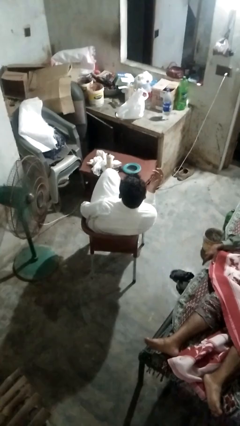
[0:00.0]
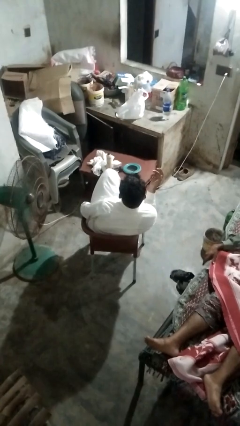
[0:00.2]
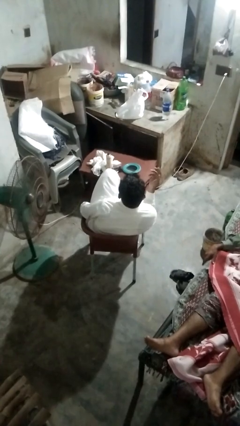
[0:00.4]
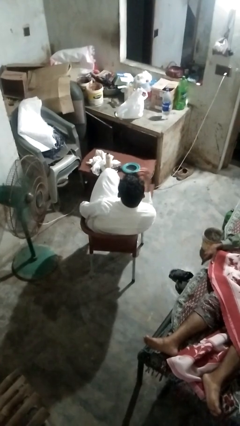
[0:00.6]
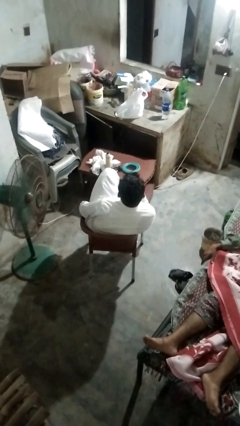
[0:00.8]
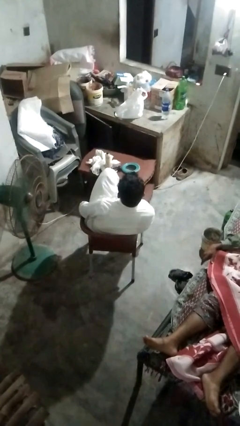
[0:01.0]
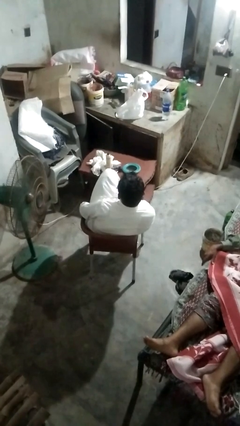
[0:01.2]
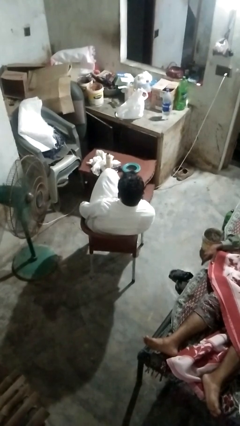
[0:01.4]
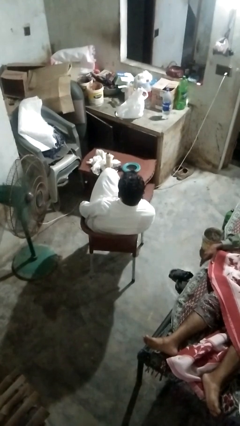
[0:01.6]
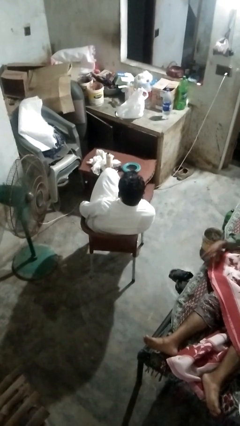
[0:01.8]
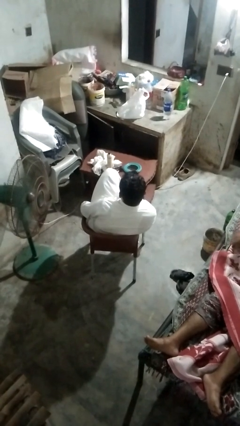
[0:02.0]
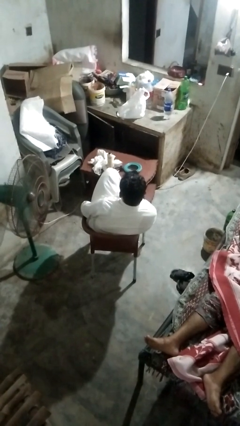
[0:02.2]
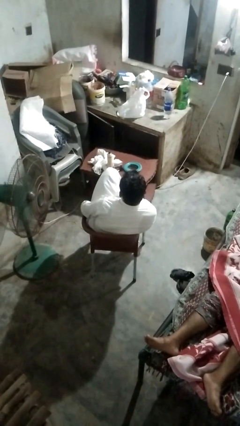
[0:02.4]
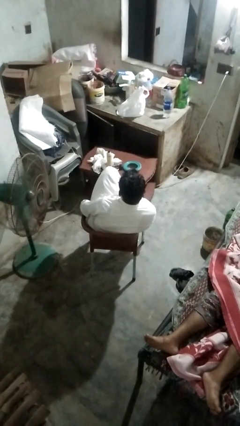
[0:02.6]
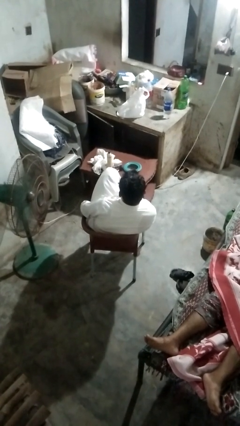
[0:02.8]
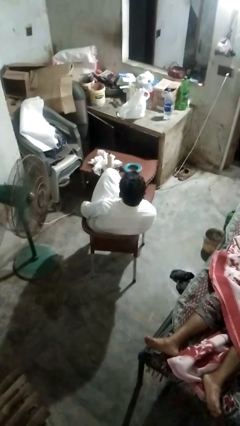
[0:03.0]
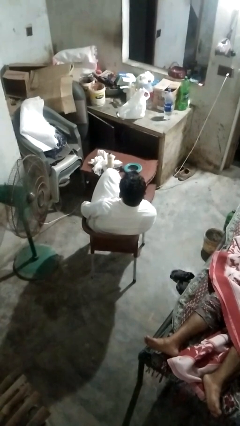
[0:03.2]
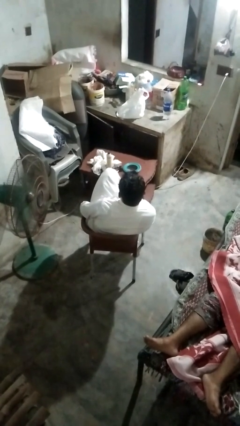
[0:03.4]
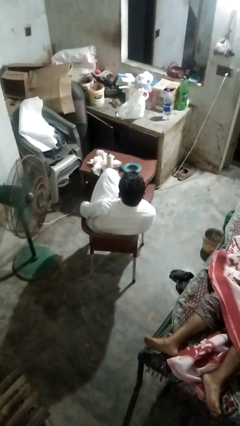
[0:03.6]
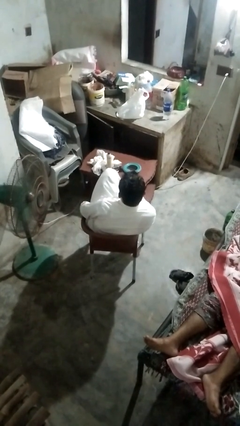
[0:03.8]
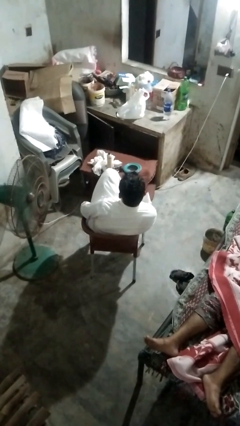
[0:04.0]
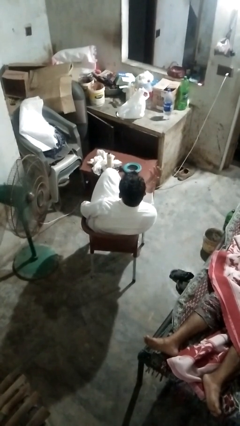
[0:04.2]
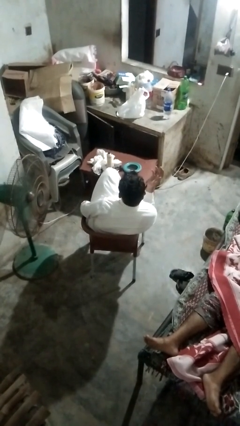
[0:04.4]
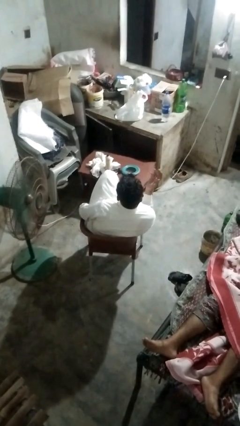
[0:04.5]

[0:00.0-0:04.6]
person licks fingers

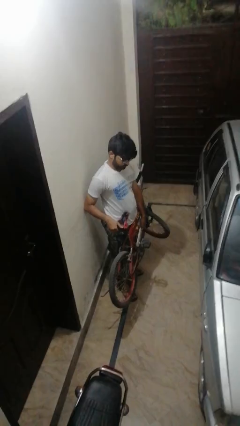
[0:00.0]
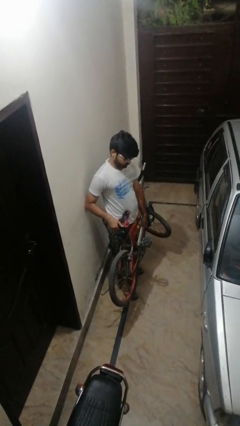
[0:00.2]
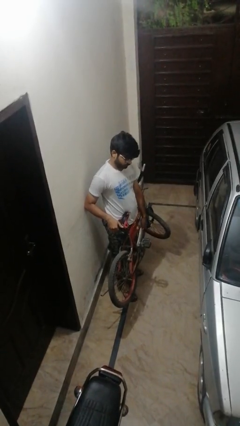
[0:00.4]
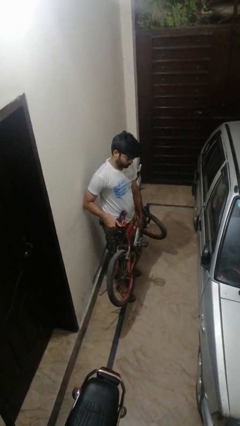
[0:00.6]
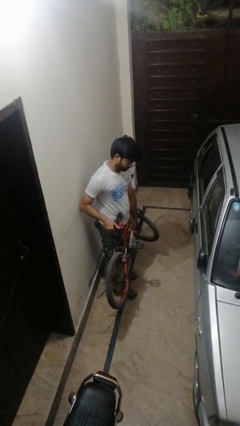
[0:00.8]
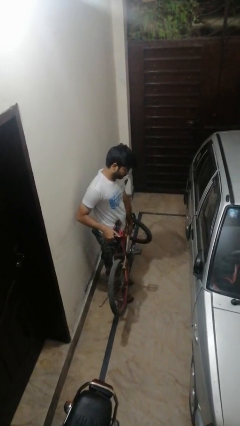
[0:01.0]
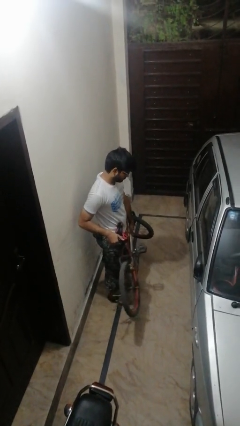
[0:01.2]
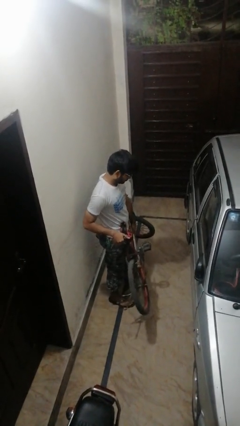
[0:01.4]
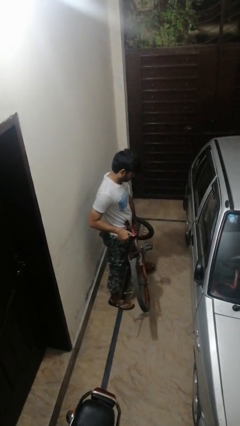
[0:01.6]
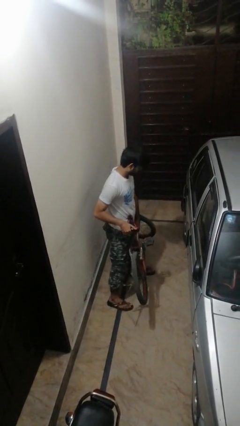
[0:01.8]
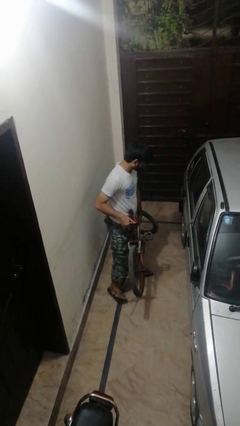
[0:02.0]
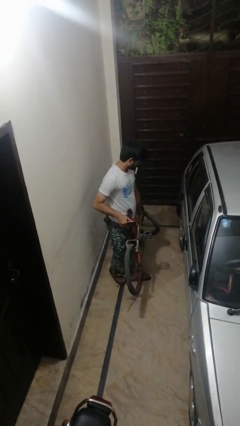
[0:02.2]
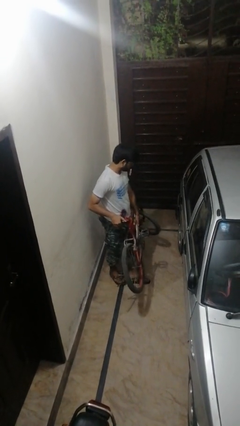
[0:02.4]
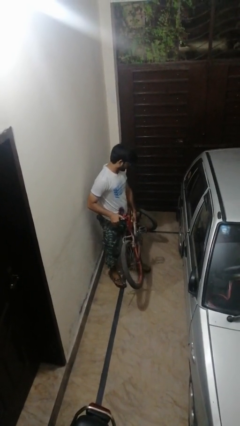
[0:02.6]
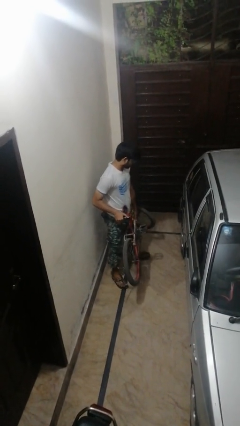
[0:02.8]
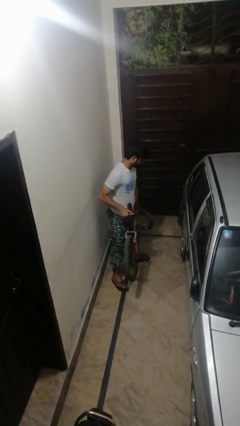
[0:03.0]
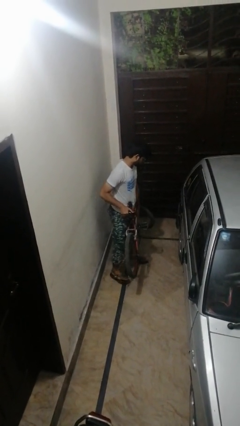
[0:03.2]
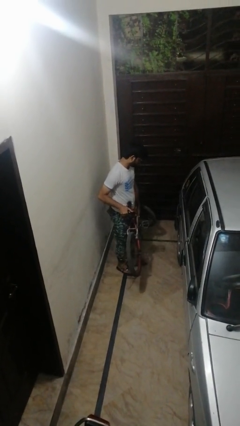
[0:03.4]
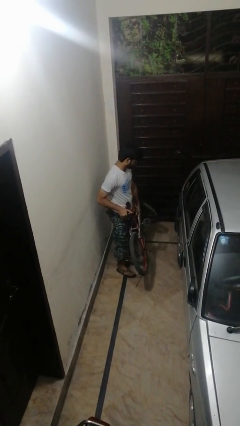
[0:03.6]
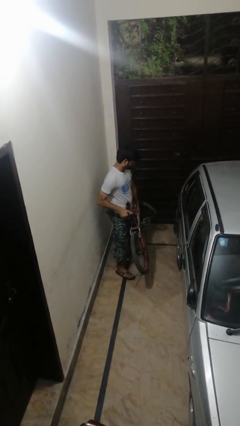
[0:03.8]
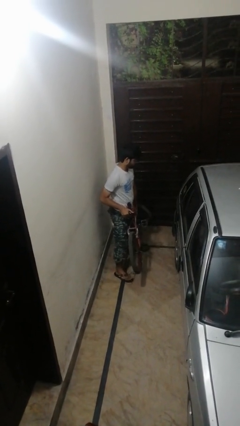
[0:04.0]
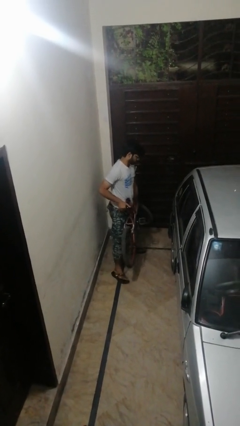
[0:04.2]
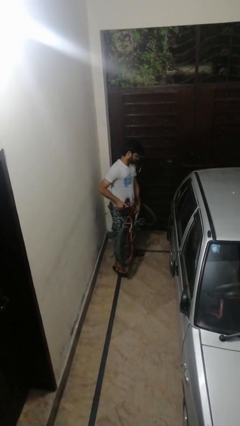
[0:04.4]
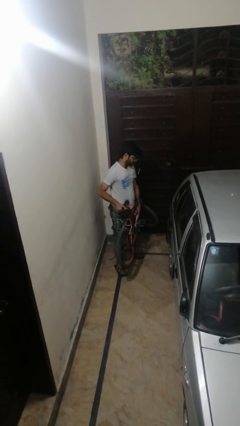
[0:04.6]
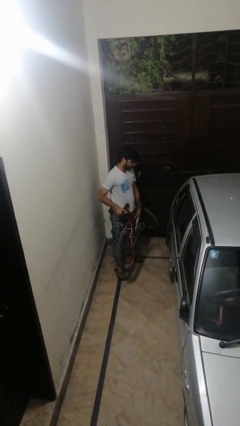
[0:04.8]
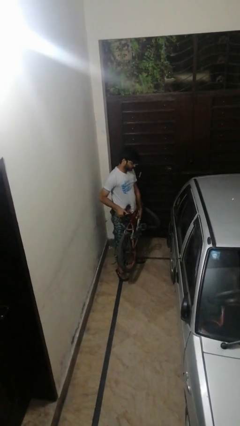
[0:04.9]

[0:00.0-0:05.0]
person carries bicycle

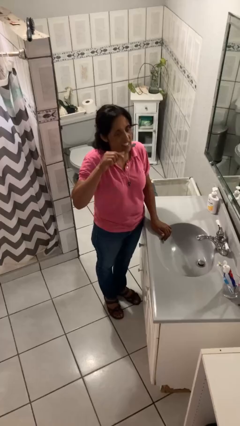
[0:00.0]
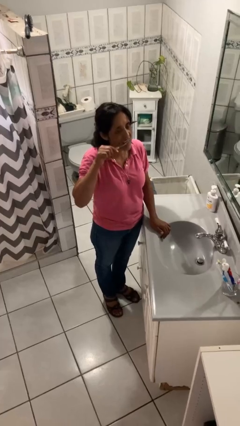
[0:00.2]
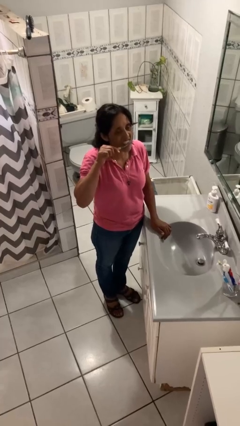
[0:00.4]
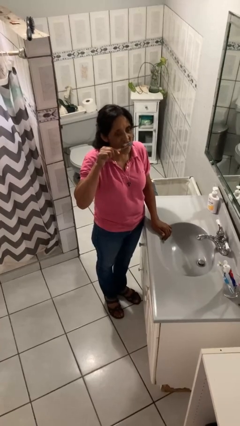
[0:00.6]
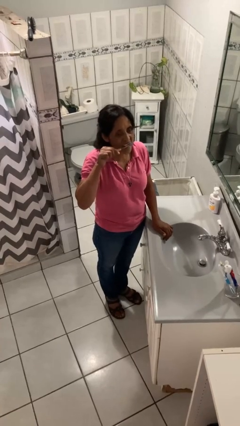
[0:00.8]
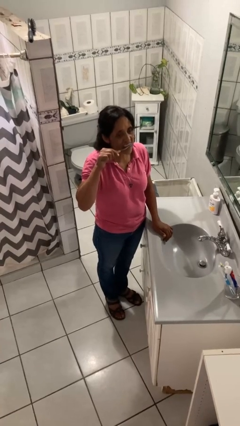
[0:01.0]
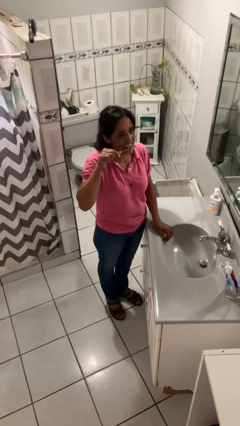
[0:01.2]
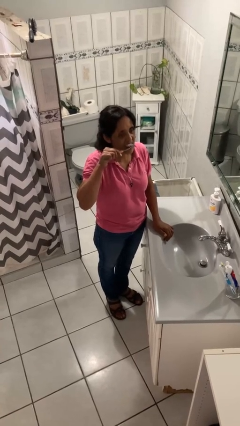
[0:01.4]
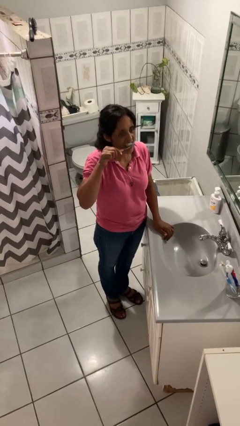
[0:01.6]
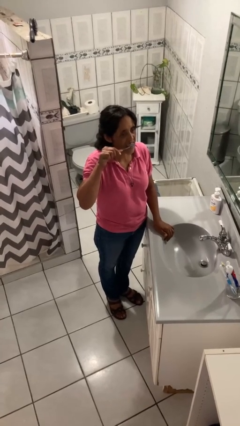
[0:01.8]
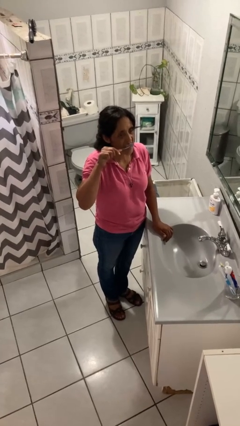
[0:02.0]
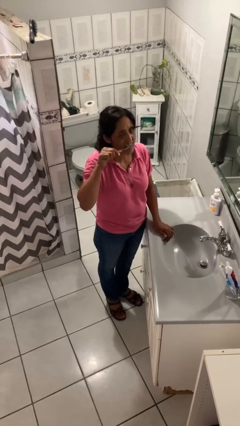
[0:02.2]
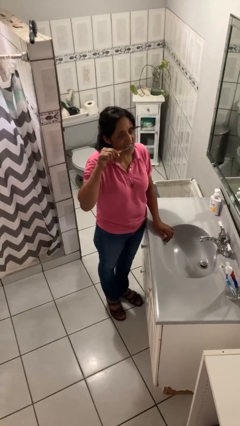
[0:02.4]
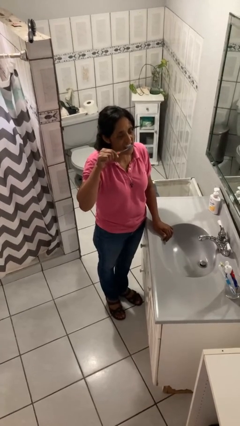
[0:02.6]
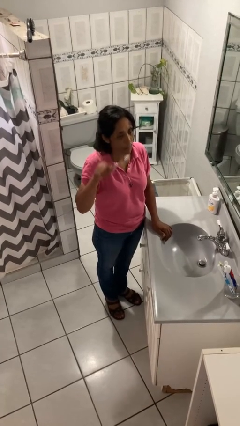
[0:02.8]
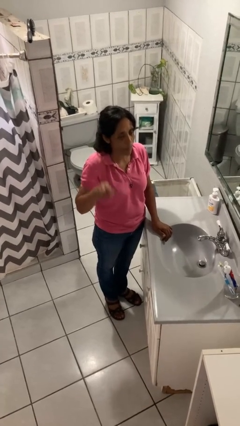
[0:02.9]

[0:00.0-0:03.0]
person brushes teeth

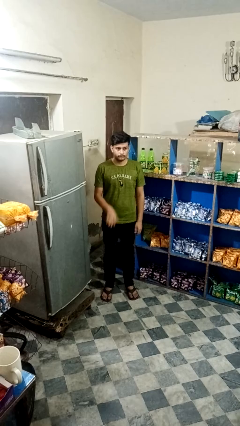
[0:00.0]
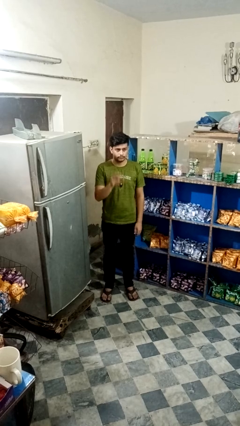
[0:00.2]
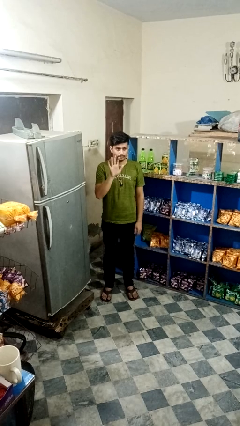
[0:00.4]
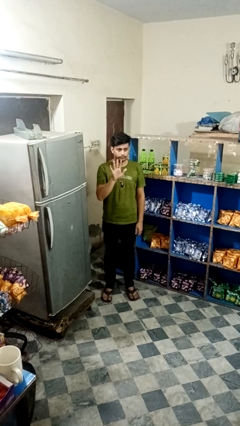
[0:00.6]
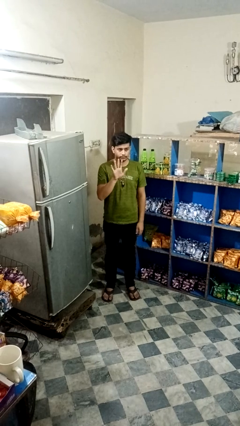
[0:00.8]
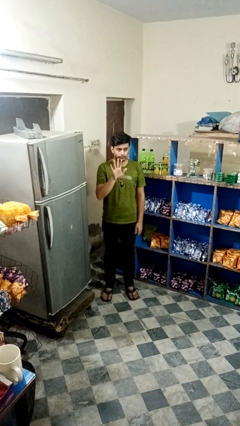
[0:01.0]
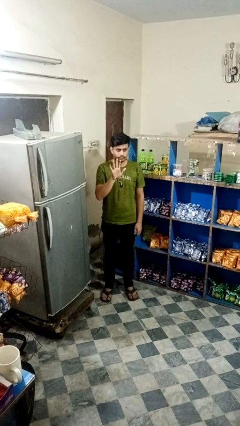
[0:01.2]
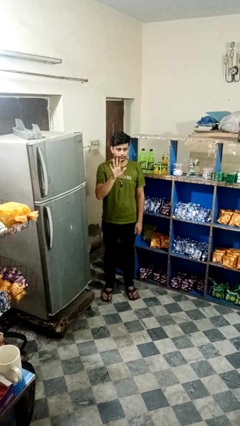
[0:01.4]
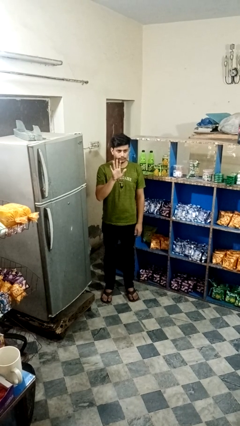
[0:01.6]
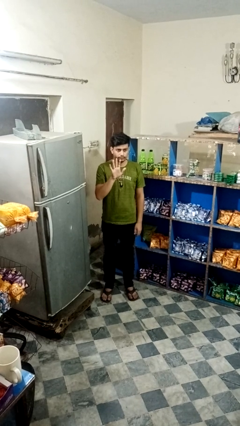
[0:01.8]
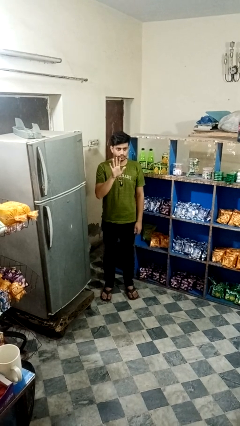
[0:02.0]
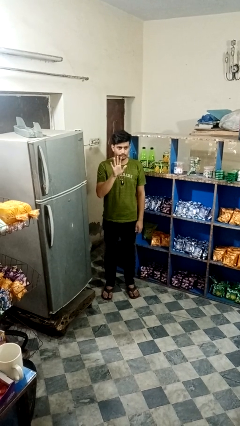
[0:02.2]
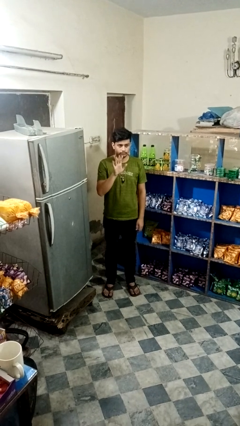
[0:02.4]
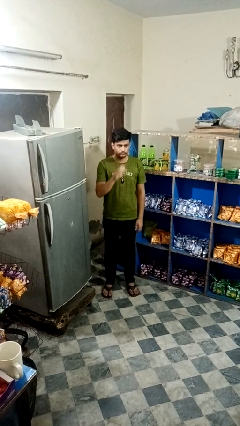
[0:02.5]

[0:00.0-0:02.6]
person gestures number five

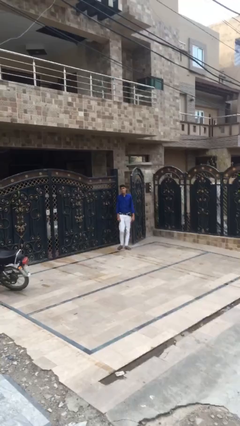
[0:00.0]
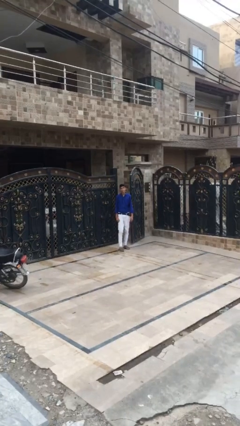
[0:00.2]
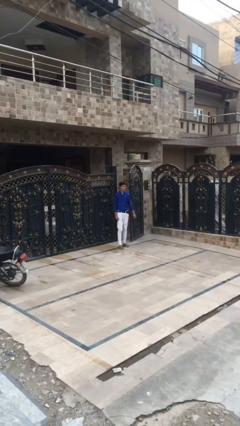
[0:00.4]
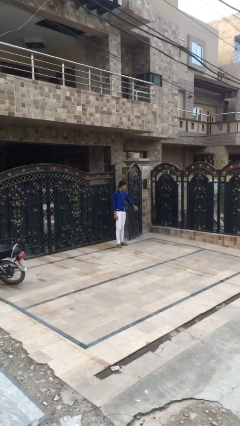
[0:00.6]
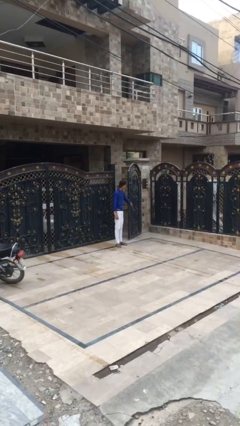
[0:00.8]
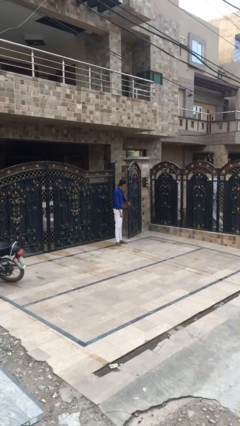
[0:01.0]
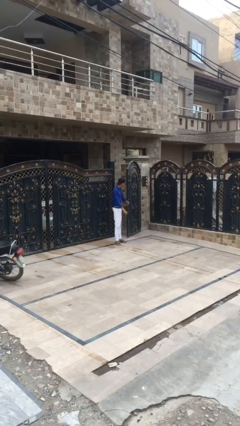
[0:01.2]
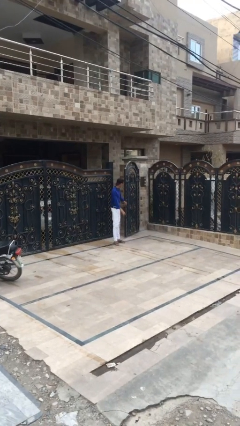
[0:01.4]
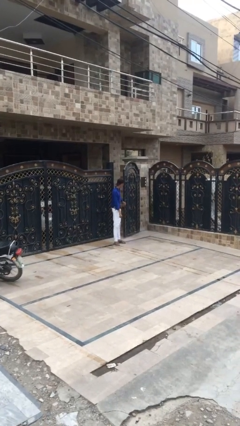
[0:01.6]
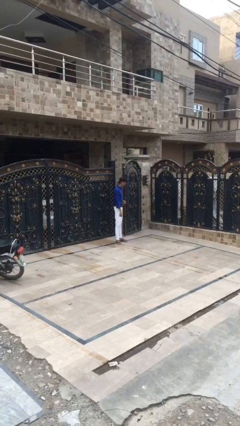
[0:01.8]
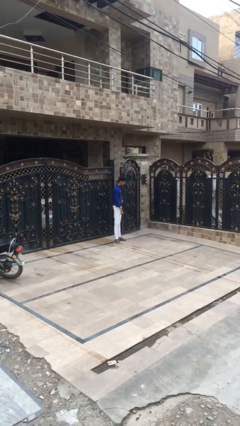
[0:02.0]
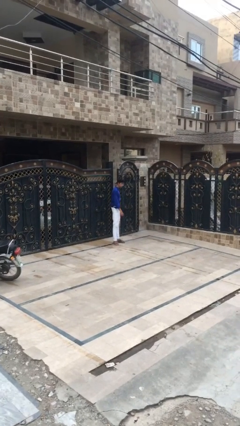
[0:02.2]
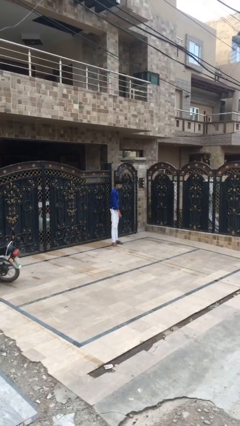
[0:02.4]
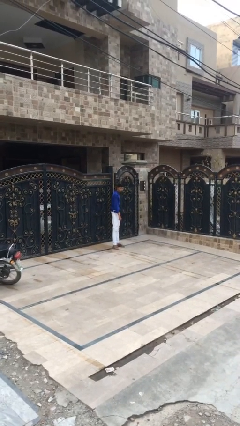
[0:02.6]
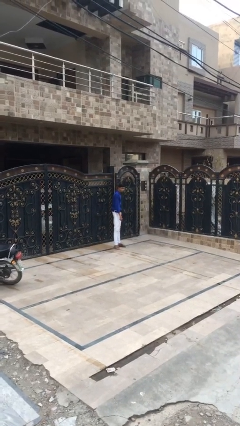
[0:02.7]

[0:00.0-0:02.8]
person closes facility door
